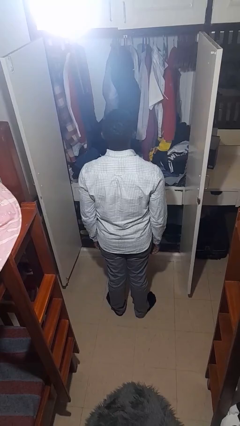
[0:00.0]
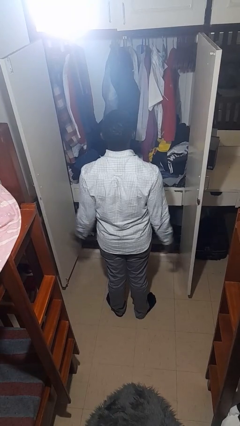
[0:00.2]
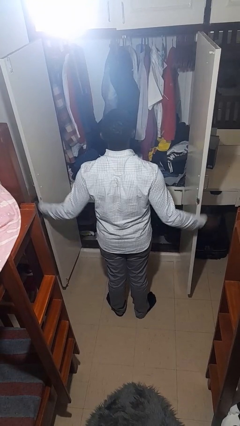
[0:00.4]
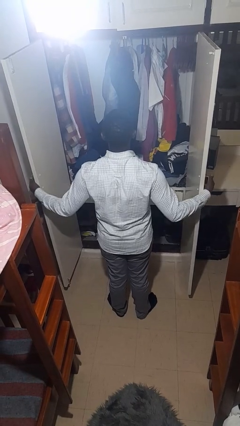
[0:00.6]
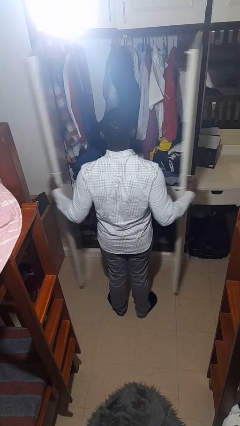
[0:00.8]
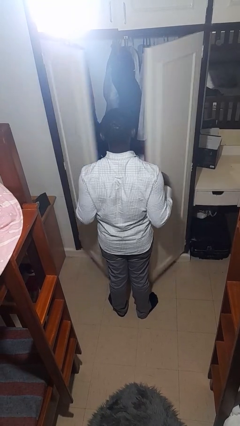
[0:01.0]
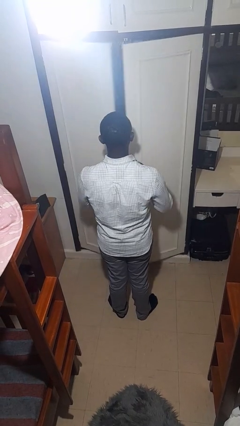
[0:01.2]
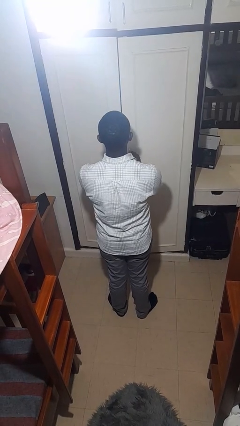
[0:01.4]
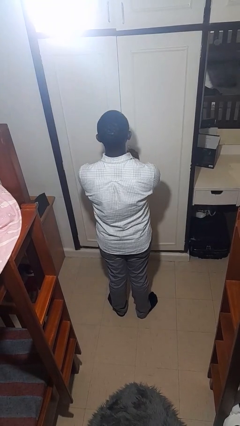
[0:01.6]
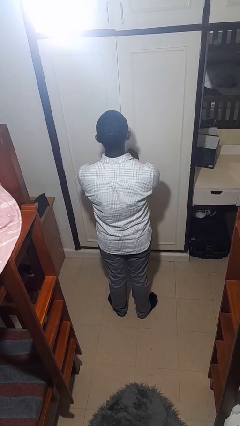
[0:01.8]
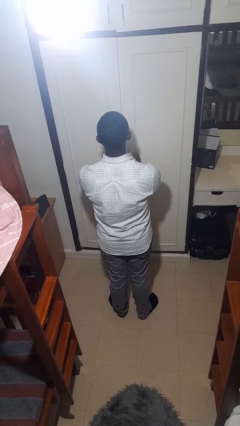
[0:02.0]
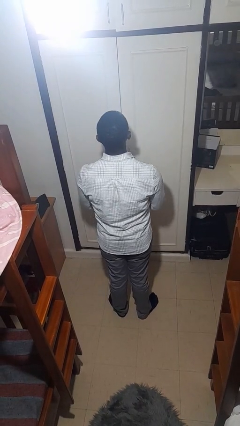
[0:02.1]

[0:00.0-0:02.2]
person closes closet door

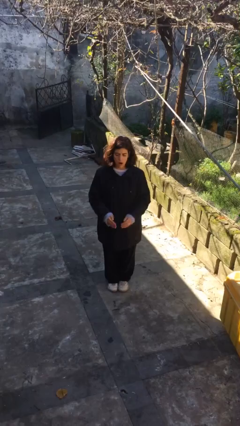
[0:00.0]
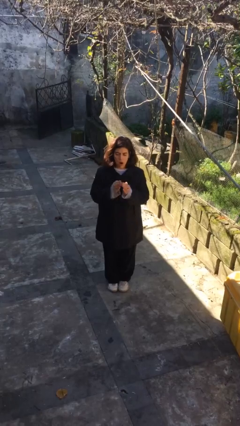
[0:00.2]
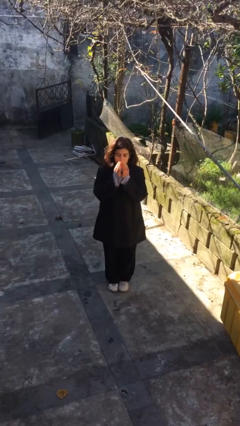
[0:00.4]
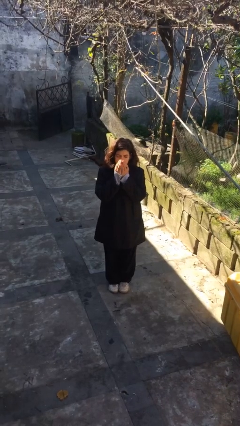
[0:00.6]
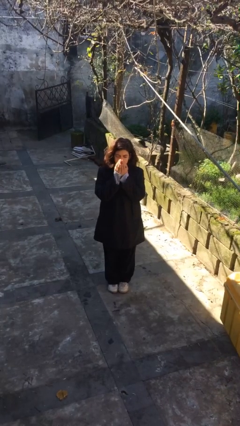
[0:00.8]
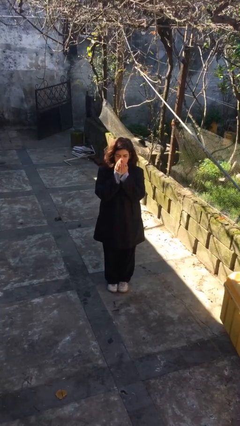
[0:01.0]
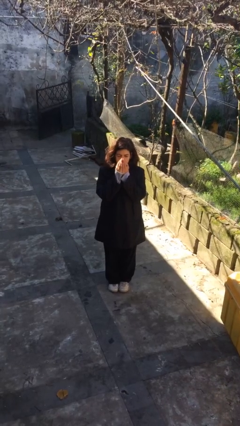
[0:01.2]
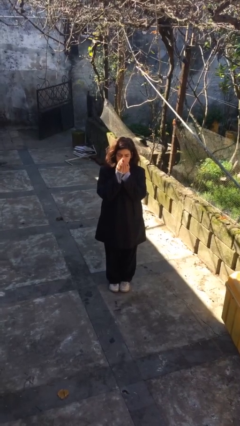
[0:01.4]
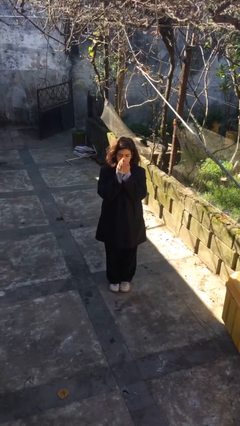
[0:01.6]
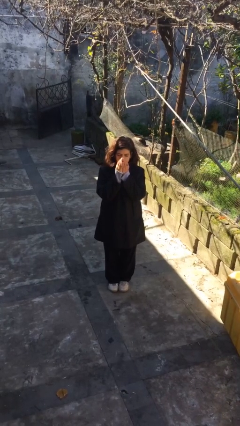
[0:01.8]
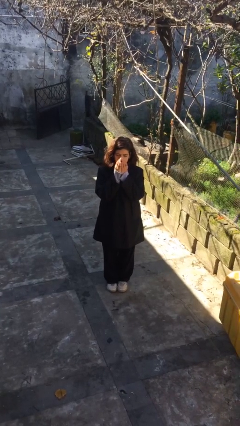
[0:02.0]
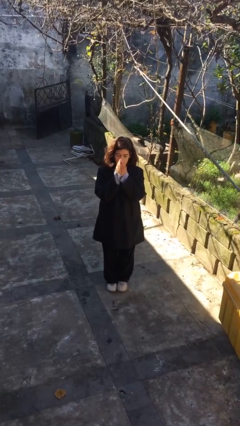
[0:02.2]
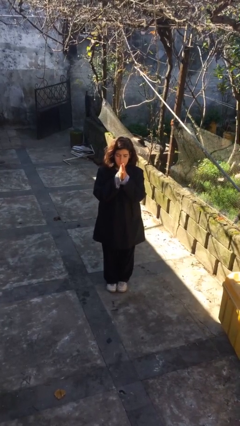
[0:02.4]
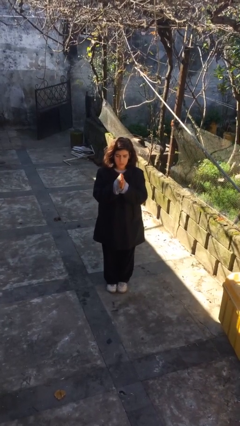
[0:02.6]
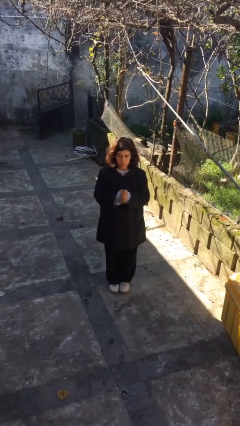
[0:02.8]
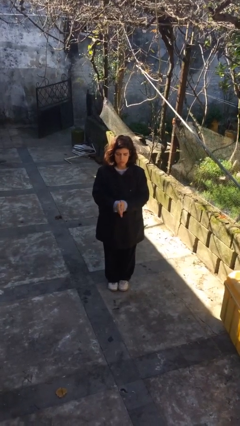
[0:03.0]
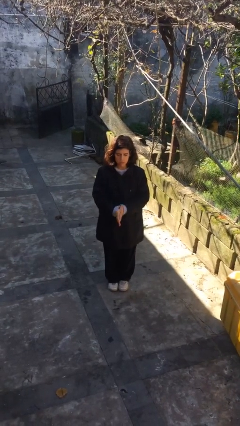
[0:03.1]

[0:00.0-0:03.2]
person blows into hands

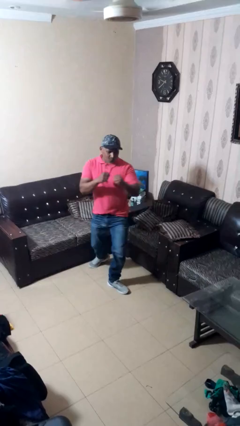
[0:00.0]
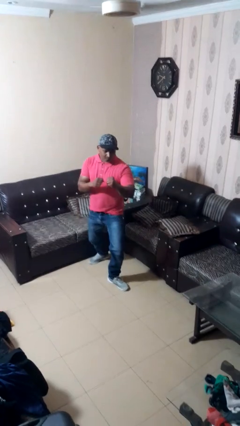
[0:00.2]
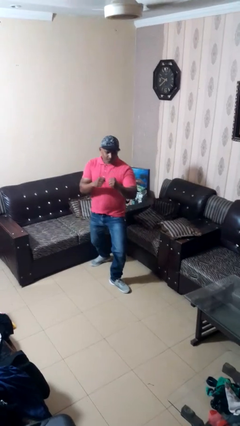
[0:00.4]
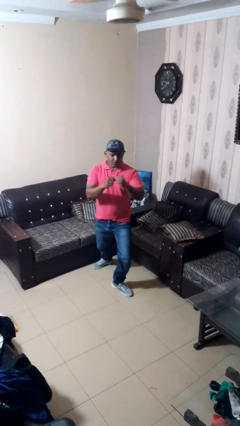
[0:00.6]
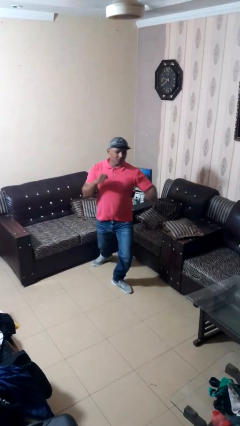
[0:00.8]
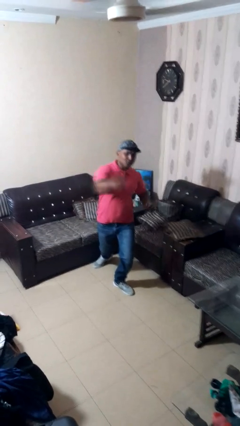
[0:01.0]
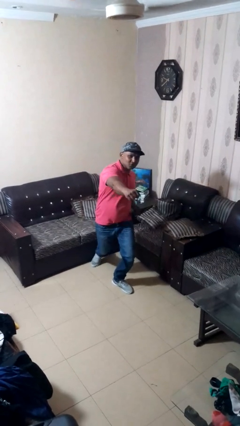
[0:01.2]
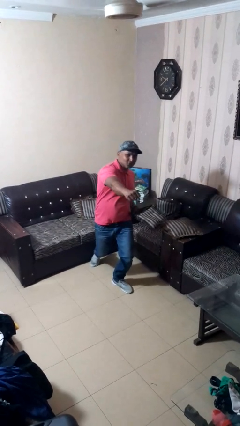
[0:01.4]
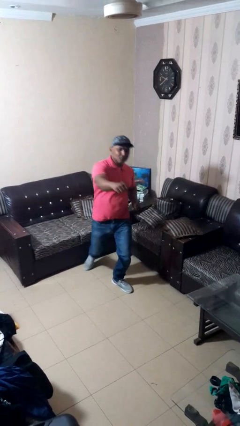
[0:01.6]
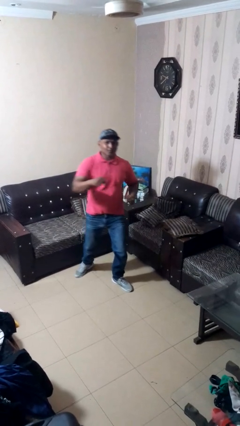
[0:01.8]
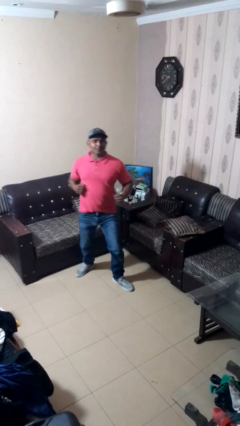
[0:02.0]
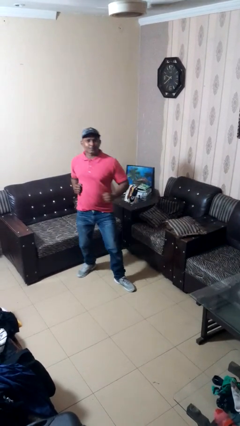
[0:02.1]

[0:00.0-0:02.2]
person karate chop

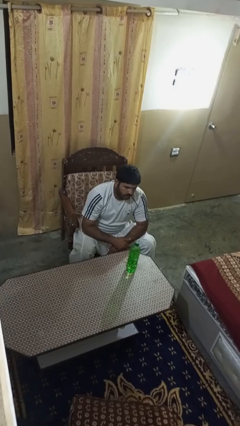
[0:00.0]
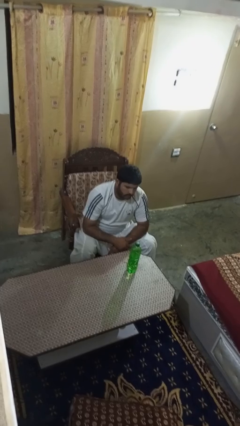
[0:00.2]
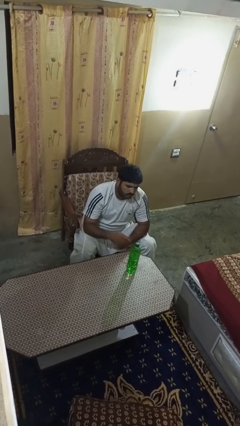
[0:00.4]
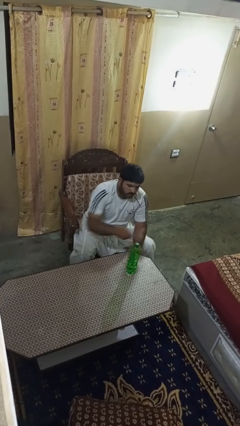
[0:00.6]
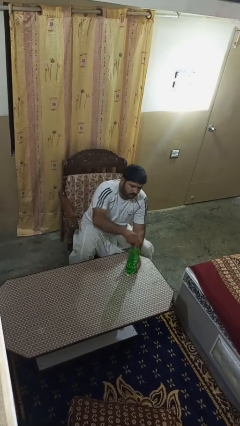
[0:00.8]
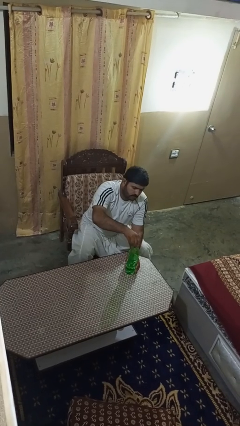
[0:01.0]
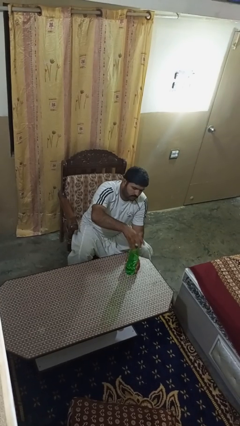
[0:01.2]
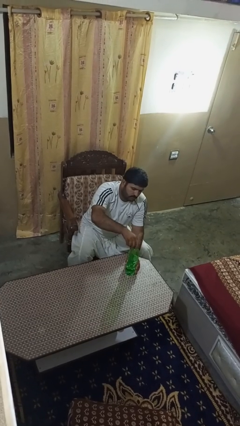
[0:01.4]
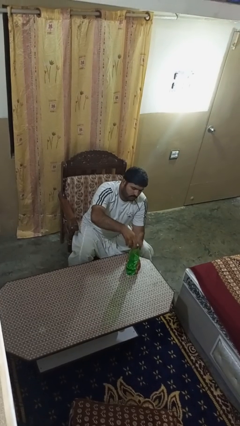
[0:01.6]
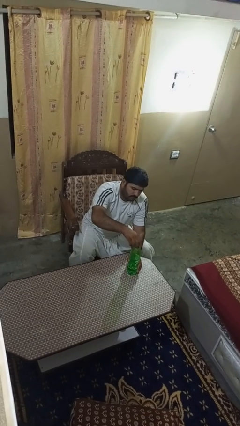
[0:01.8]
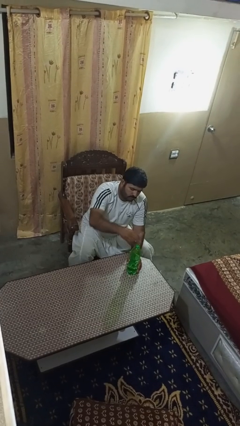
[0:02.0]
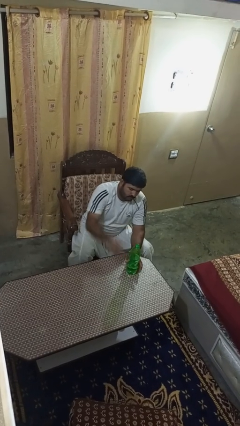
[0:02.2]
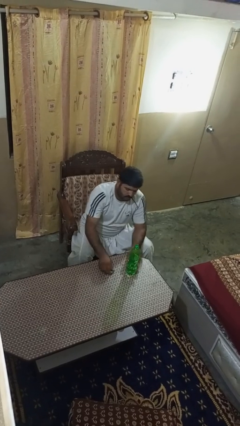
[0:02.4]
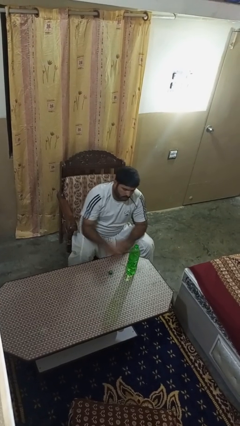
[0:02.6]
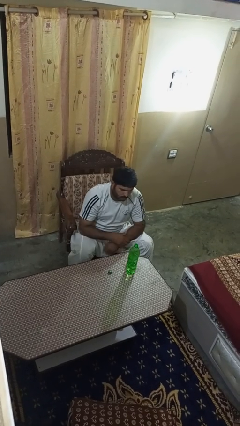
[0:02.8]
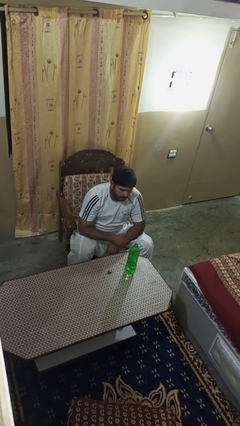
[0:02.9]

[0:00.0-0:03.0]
person unscrews lid from bottle

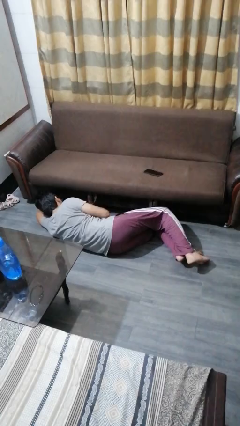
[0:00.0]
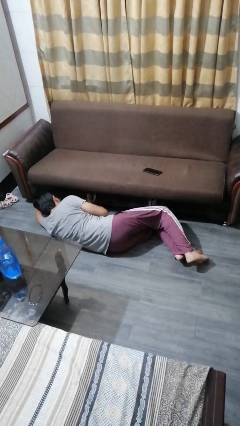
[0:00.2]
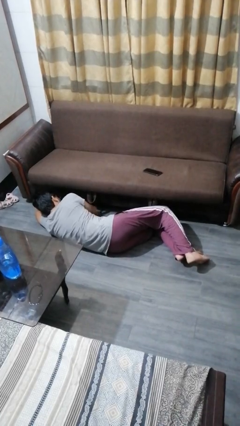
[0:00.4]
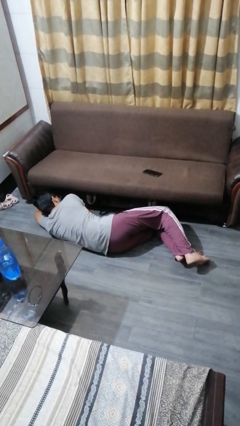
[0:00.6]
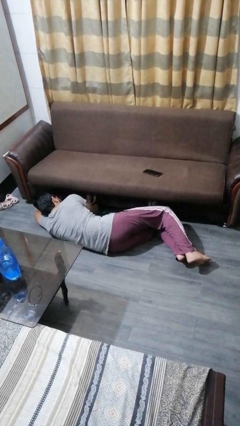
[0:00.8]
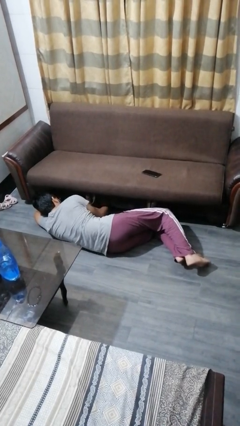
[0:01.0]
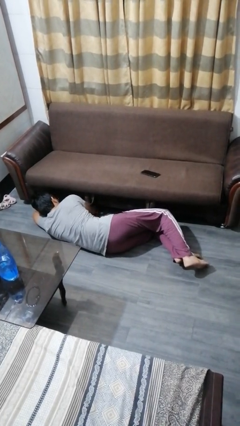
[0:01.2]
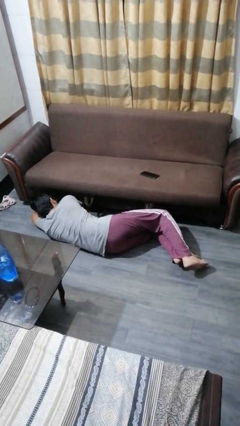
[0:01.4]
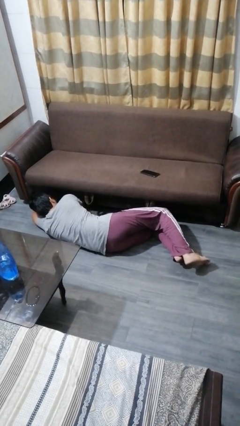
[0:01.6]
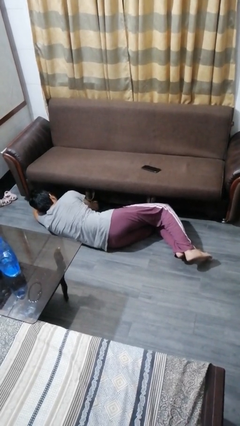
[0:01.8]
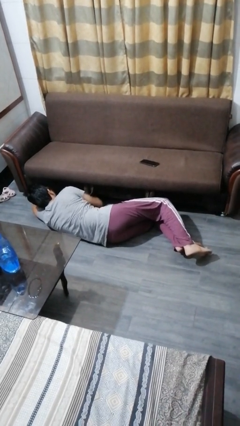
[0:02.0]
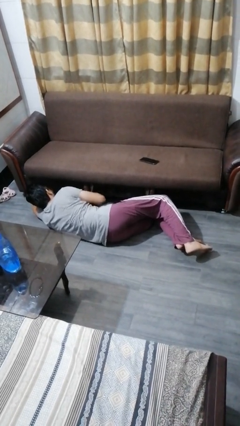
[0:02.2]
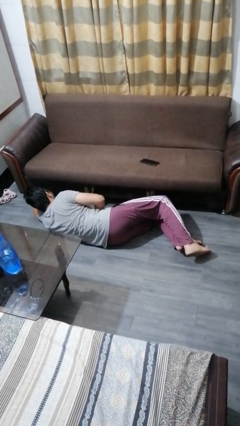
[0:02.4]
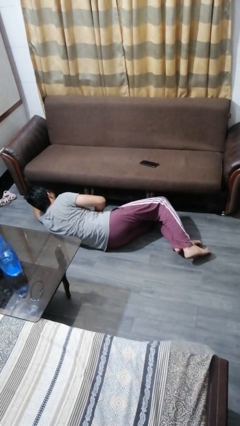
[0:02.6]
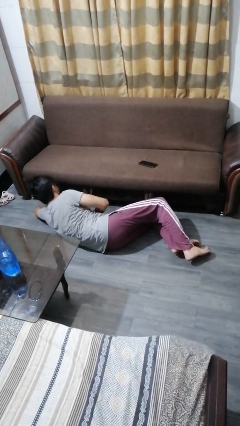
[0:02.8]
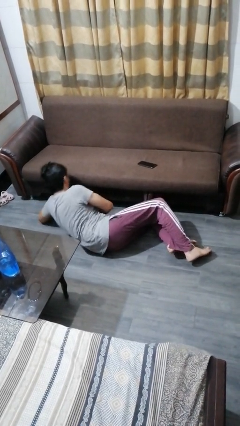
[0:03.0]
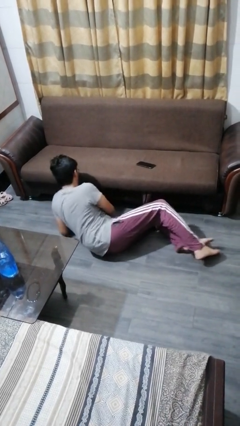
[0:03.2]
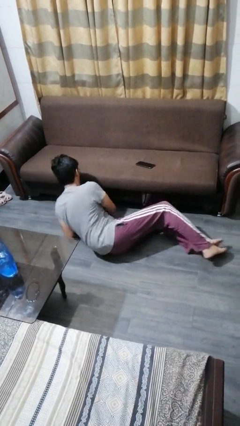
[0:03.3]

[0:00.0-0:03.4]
person searches under couch

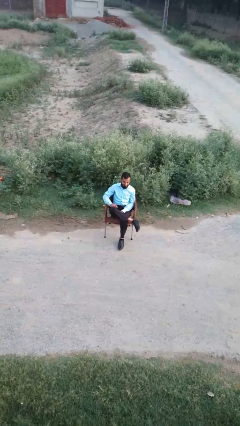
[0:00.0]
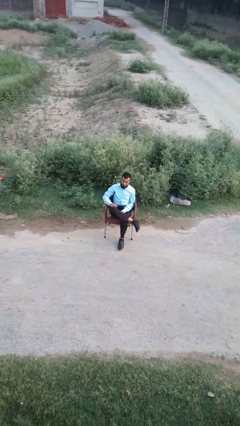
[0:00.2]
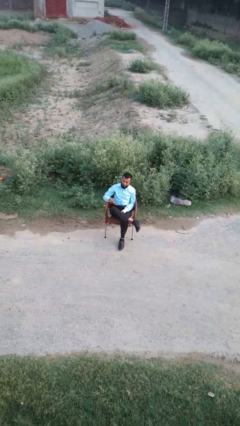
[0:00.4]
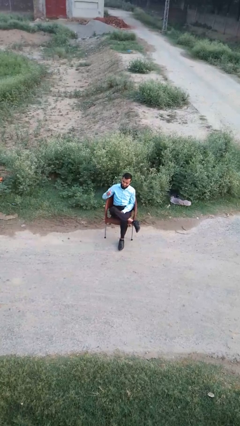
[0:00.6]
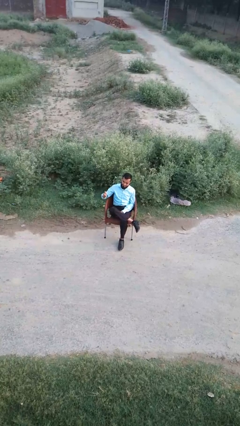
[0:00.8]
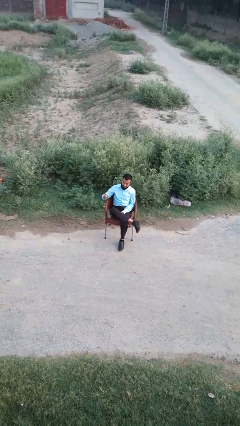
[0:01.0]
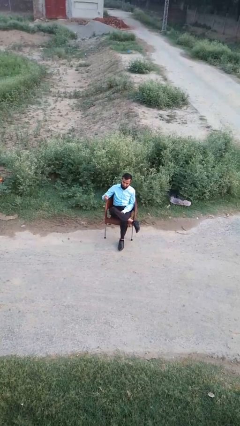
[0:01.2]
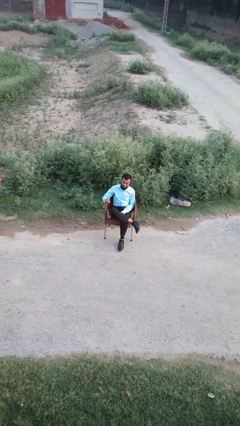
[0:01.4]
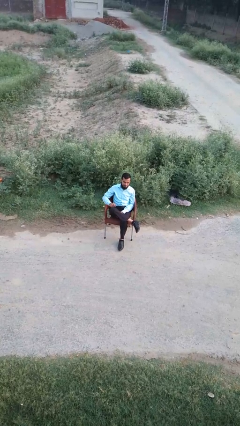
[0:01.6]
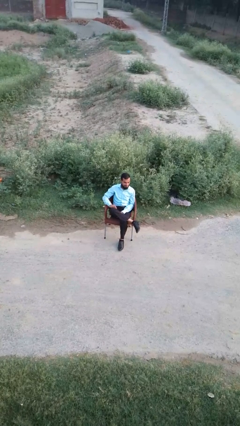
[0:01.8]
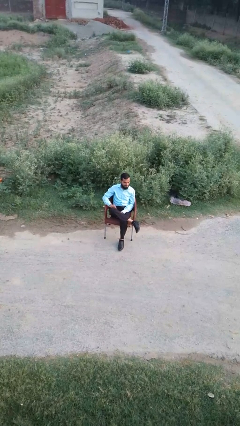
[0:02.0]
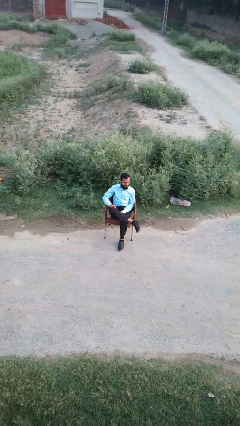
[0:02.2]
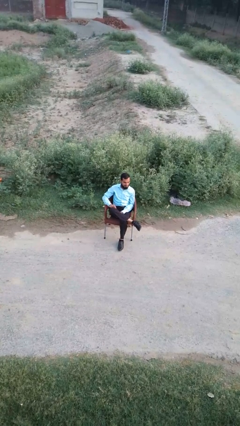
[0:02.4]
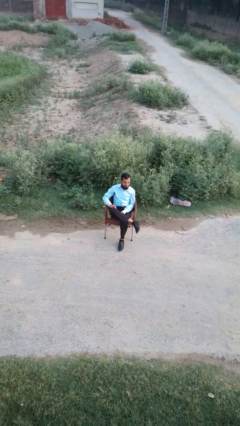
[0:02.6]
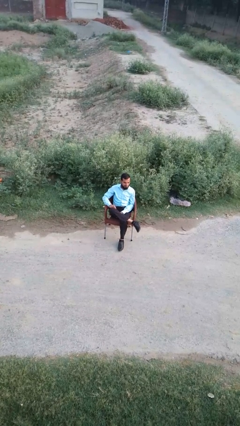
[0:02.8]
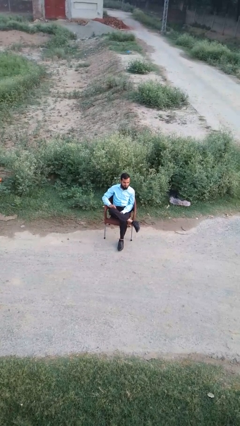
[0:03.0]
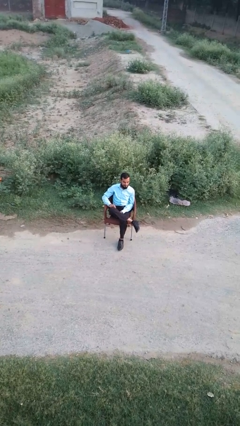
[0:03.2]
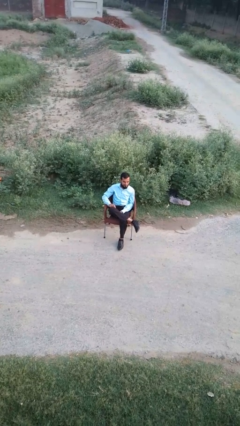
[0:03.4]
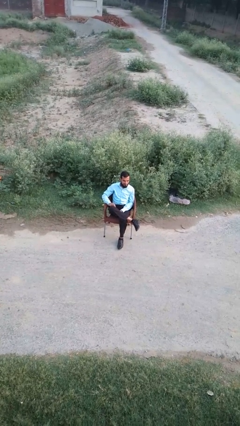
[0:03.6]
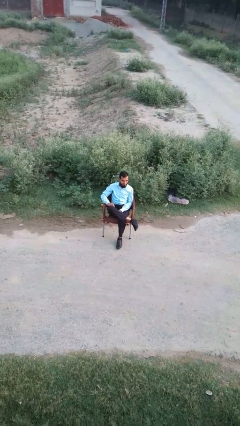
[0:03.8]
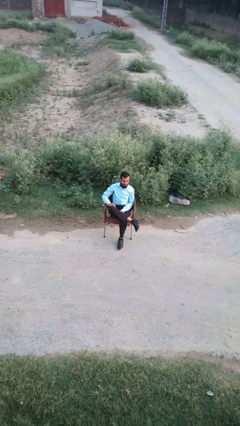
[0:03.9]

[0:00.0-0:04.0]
person gestures thumbs up
